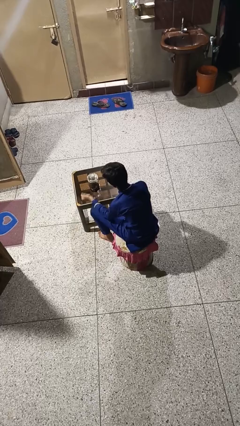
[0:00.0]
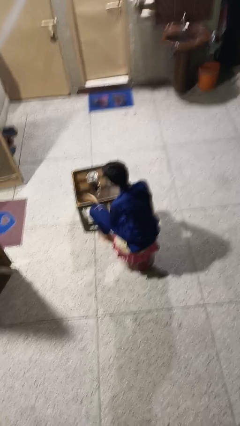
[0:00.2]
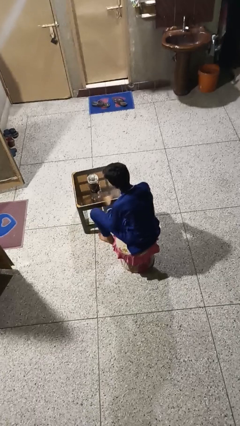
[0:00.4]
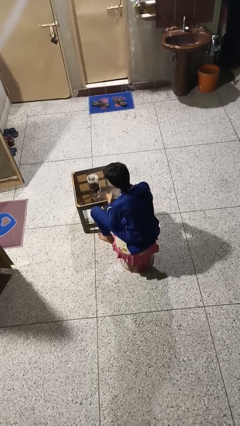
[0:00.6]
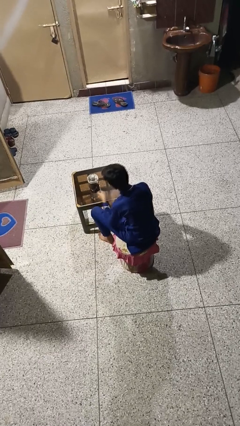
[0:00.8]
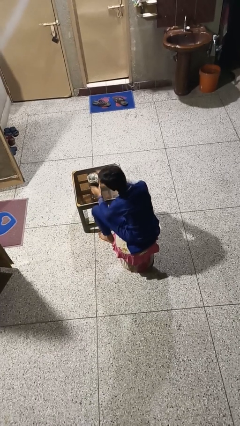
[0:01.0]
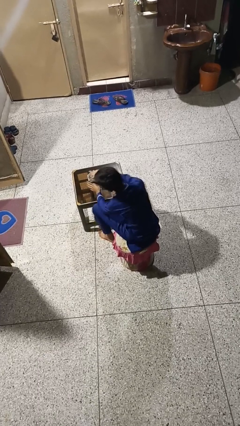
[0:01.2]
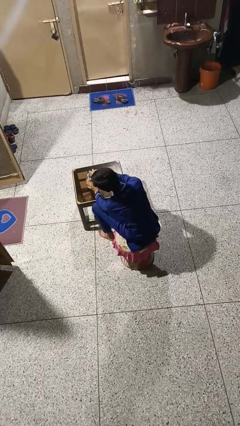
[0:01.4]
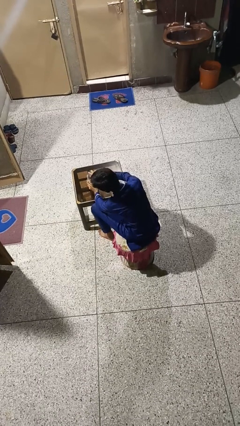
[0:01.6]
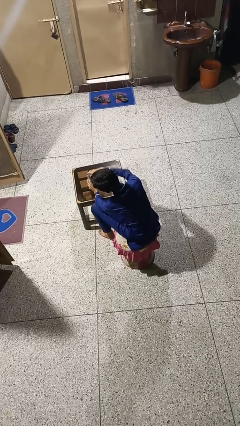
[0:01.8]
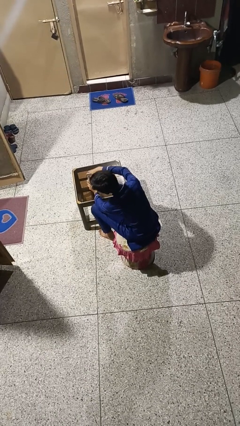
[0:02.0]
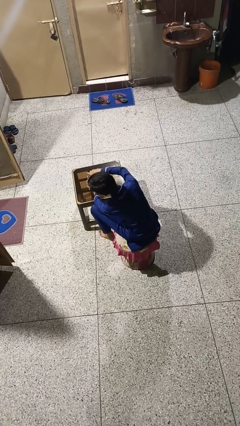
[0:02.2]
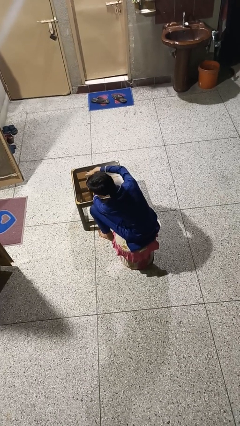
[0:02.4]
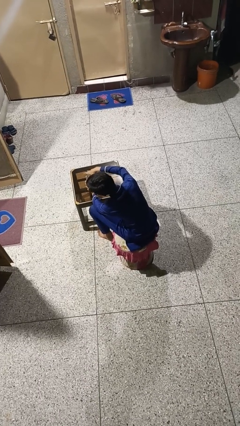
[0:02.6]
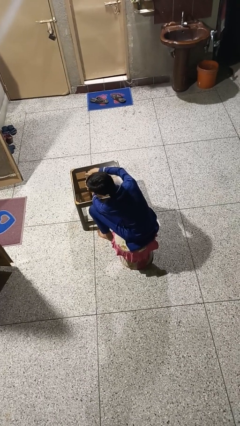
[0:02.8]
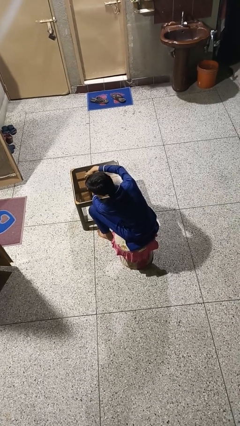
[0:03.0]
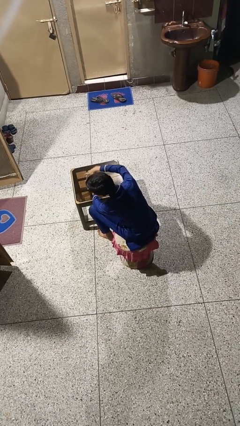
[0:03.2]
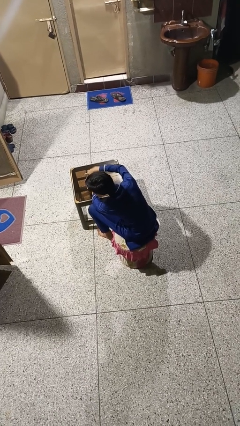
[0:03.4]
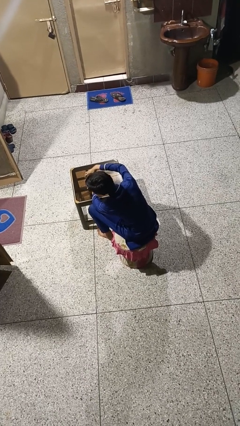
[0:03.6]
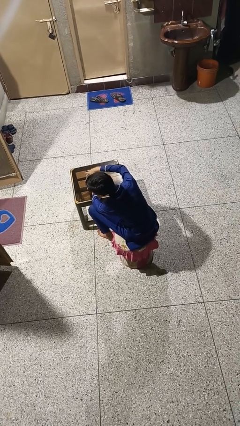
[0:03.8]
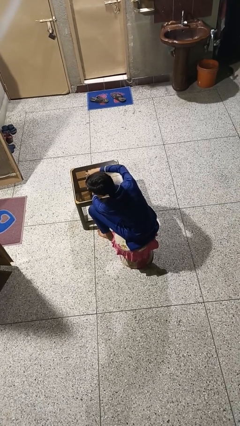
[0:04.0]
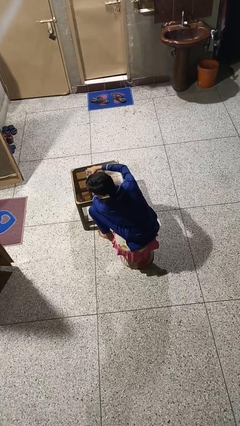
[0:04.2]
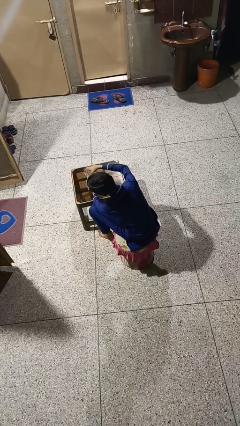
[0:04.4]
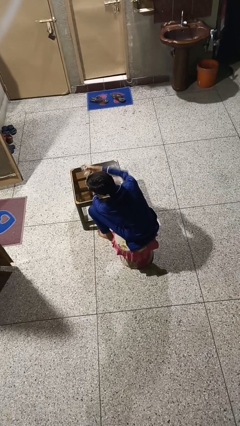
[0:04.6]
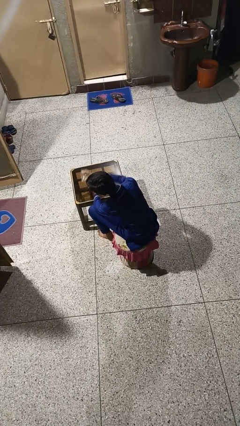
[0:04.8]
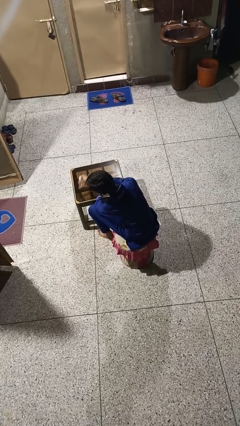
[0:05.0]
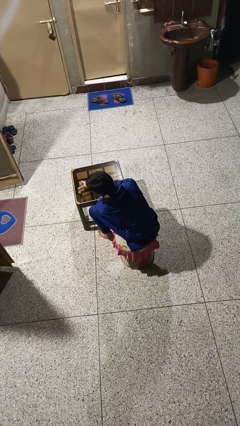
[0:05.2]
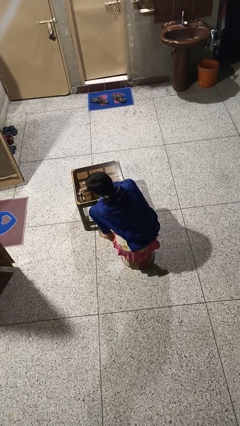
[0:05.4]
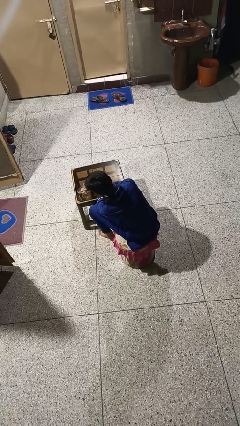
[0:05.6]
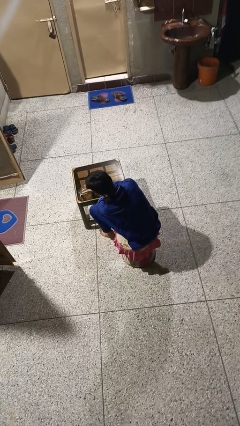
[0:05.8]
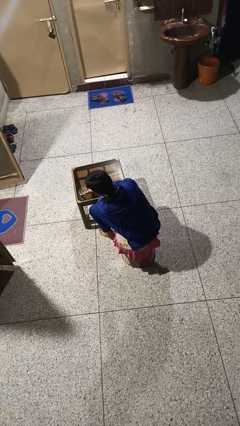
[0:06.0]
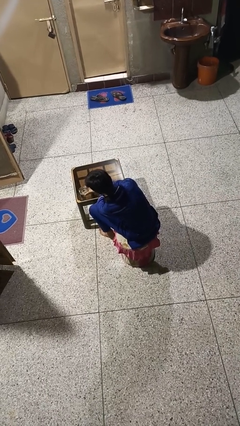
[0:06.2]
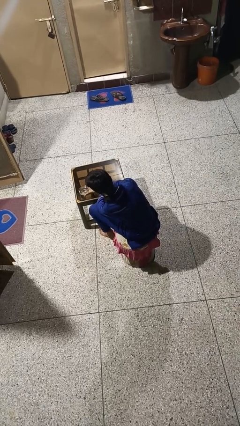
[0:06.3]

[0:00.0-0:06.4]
person opens jar

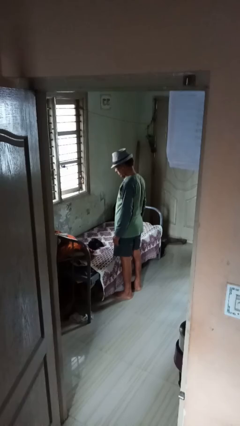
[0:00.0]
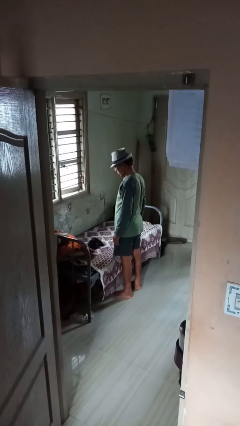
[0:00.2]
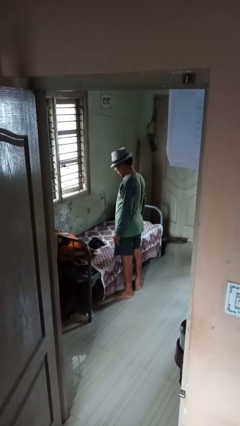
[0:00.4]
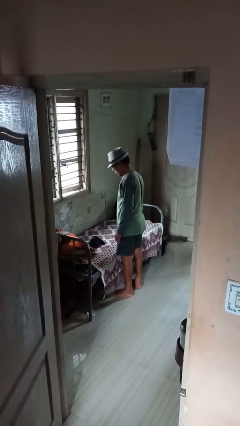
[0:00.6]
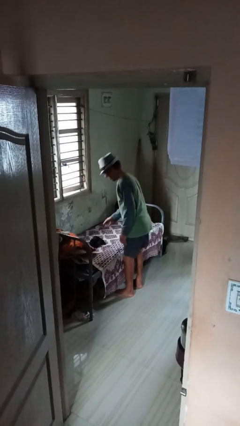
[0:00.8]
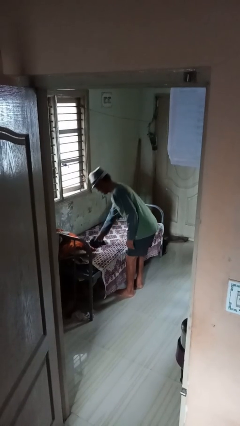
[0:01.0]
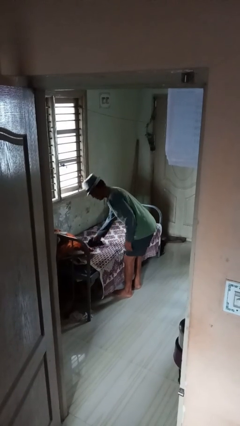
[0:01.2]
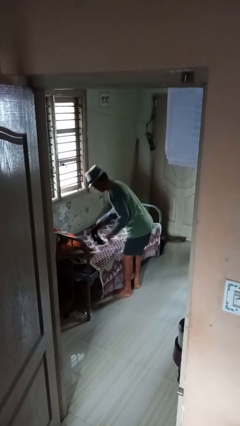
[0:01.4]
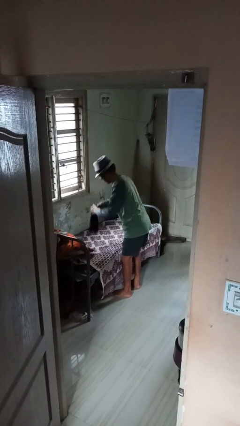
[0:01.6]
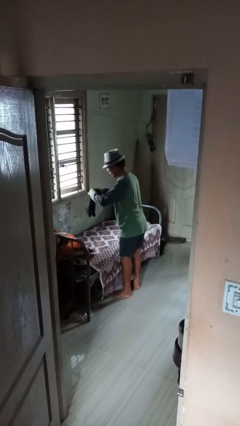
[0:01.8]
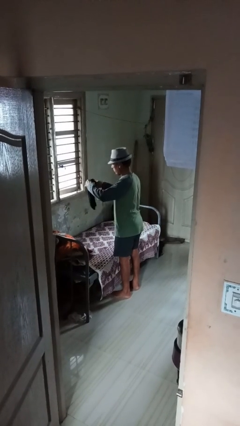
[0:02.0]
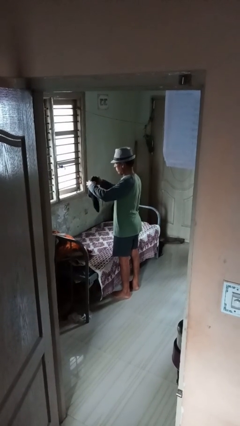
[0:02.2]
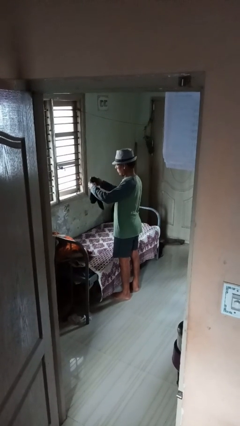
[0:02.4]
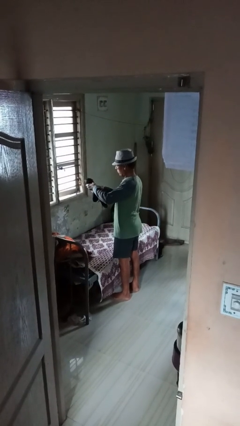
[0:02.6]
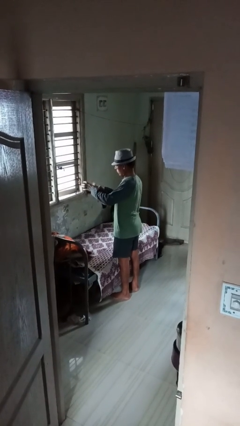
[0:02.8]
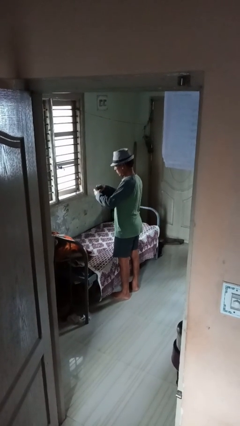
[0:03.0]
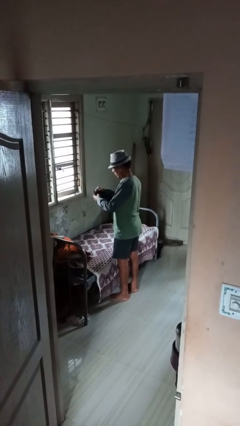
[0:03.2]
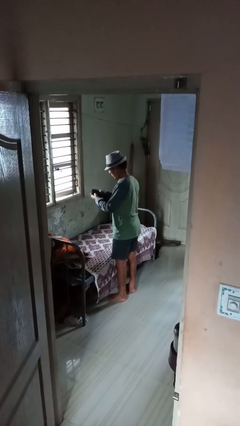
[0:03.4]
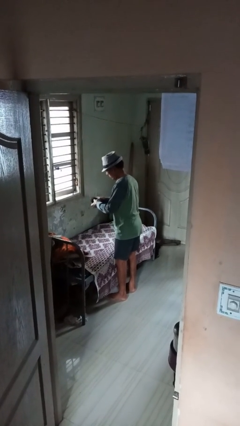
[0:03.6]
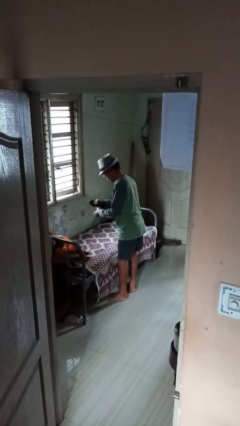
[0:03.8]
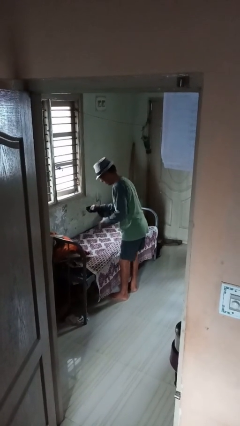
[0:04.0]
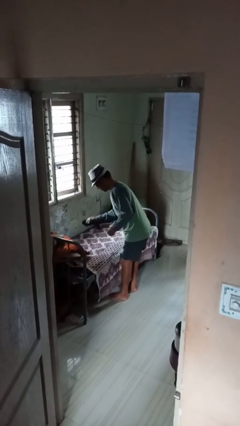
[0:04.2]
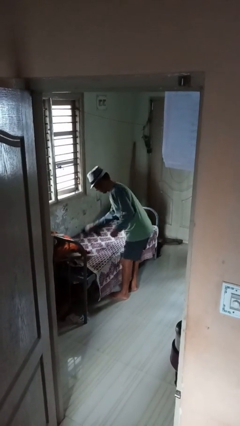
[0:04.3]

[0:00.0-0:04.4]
person folds socks

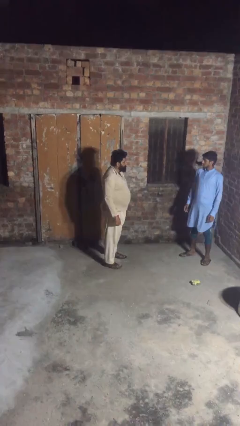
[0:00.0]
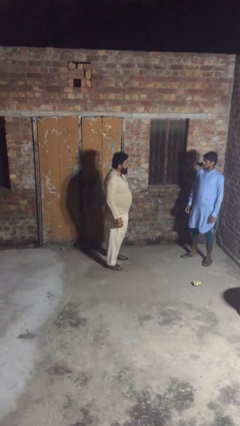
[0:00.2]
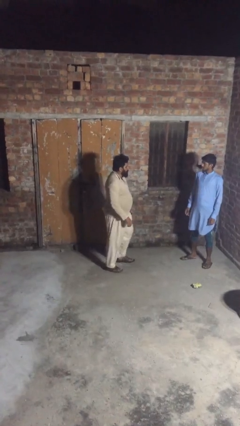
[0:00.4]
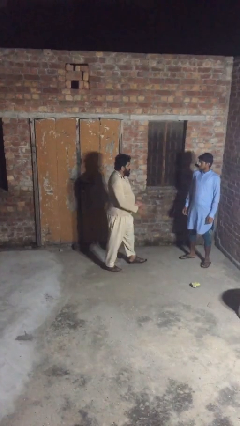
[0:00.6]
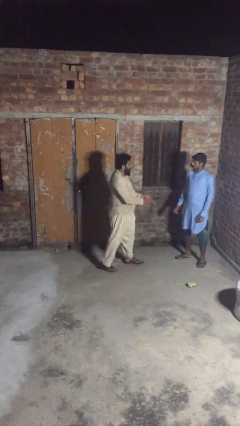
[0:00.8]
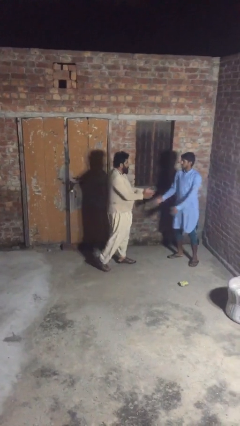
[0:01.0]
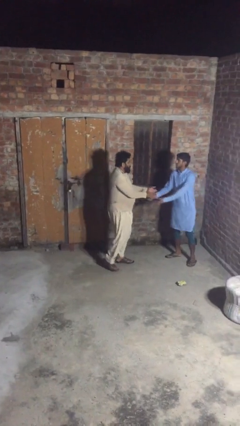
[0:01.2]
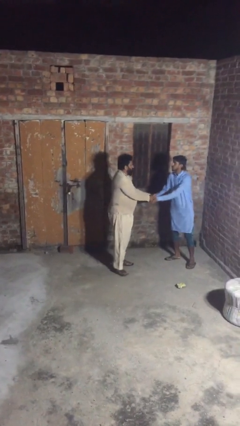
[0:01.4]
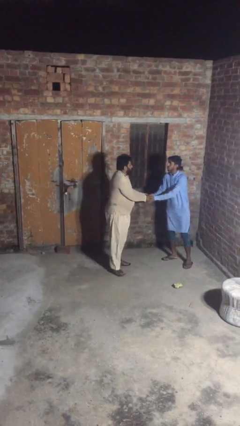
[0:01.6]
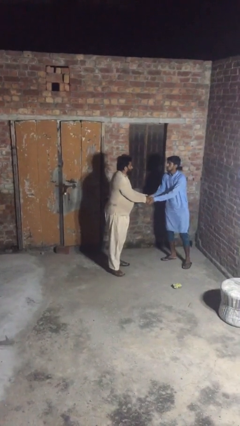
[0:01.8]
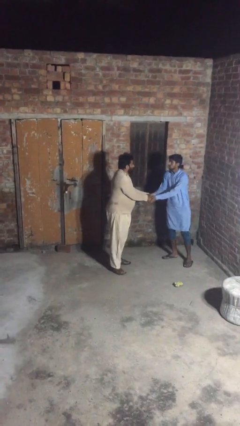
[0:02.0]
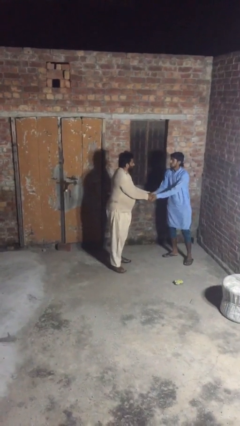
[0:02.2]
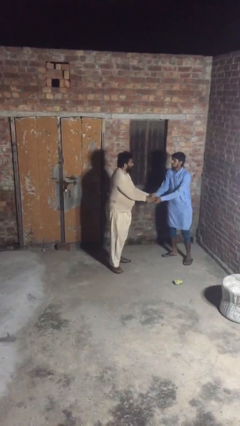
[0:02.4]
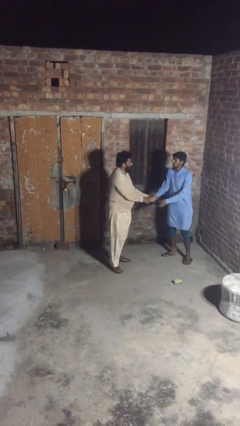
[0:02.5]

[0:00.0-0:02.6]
person shakes hand

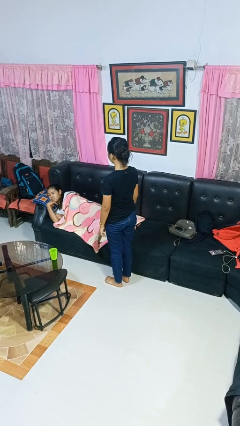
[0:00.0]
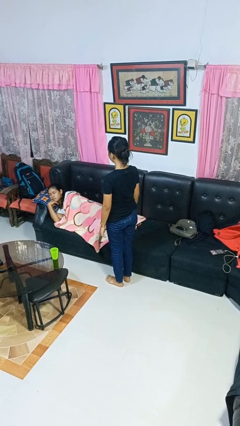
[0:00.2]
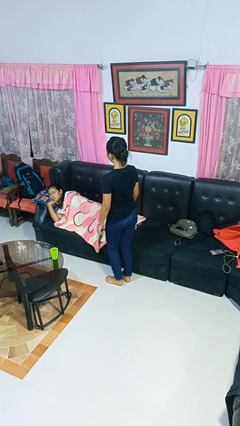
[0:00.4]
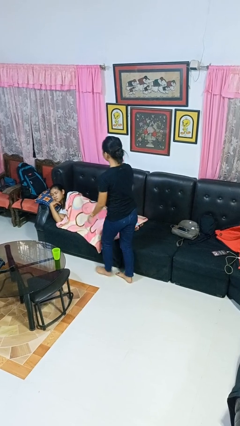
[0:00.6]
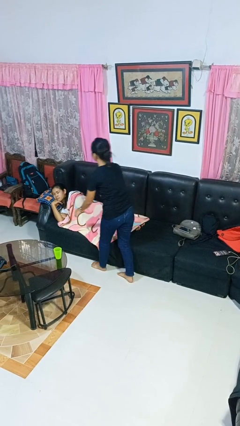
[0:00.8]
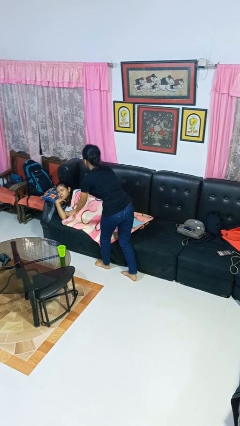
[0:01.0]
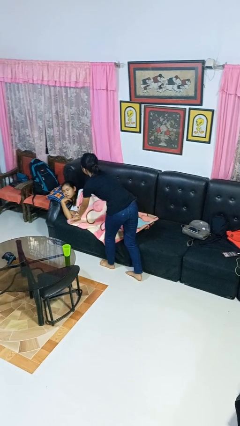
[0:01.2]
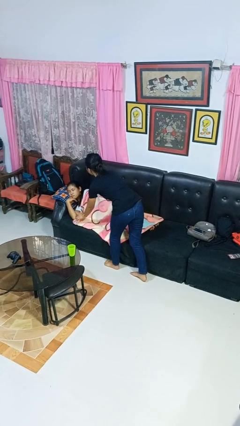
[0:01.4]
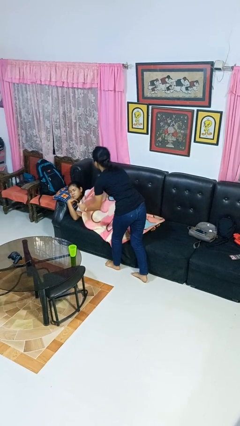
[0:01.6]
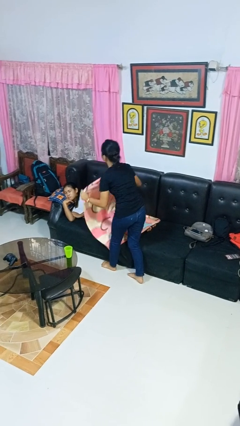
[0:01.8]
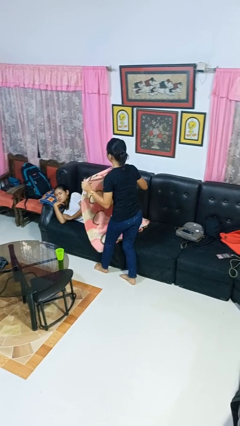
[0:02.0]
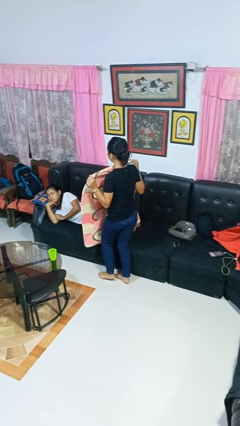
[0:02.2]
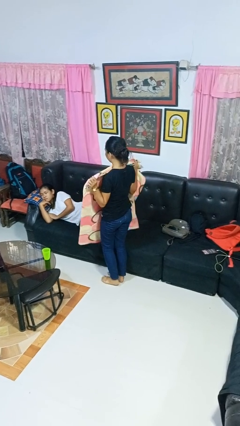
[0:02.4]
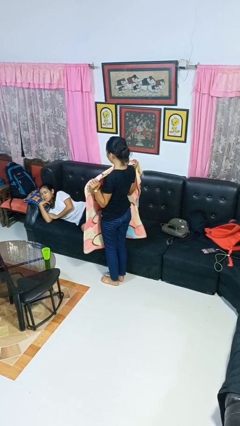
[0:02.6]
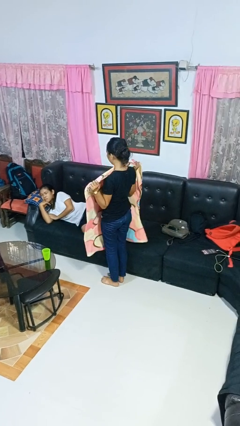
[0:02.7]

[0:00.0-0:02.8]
person uncovers friend with blanket

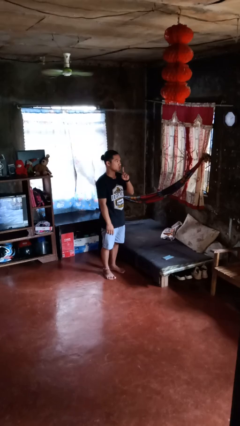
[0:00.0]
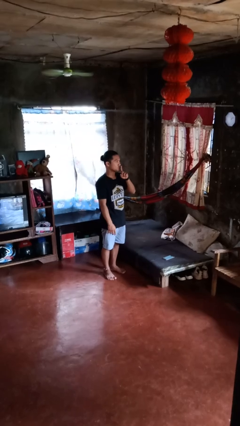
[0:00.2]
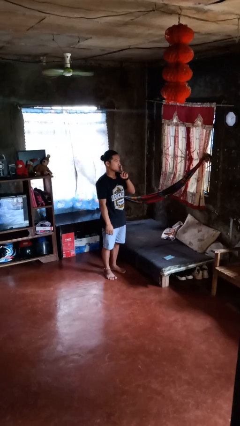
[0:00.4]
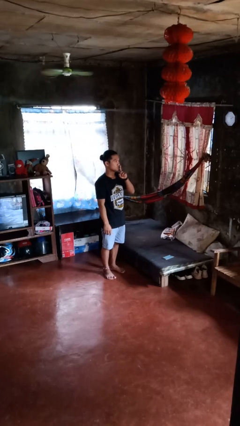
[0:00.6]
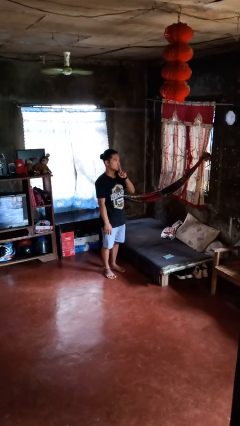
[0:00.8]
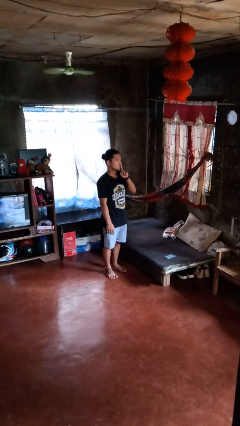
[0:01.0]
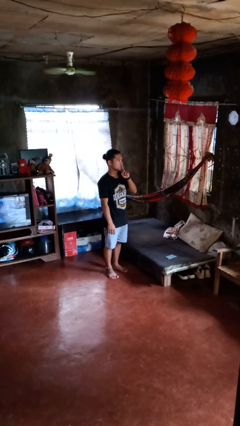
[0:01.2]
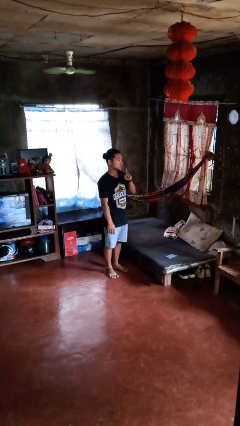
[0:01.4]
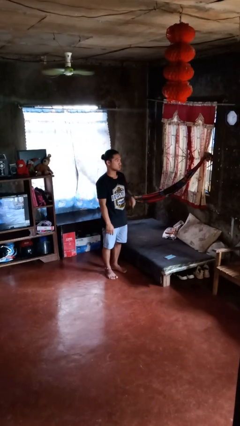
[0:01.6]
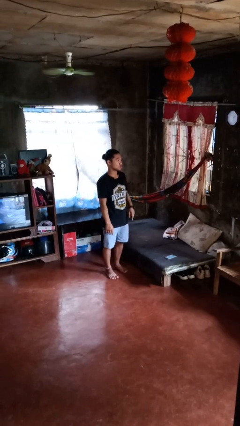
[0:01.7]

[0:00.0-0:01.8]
person gestures be quiet
